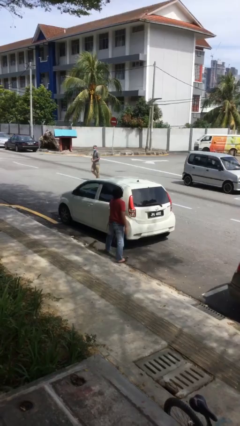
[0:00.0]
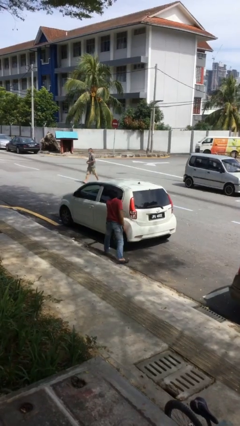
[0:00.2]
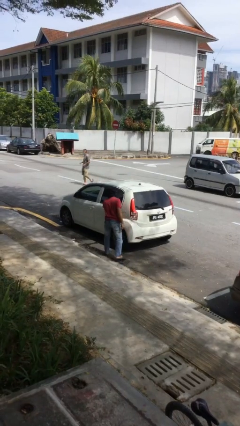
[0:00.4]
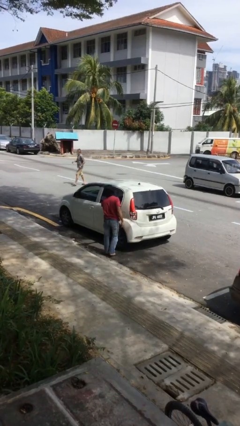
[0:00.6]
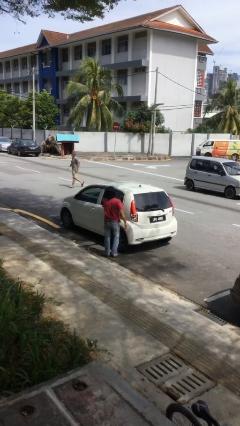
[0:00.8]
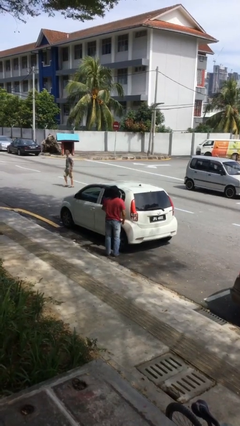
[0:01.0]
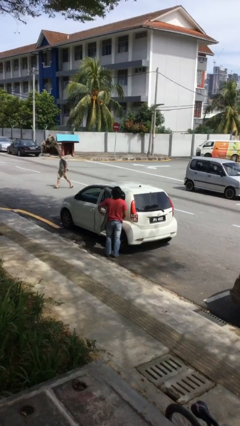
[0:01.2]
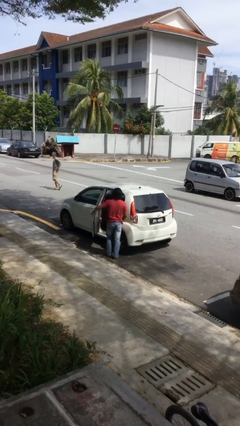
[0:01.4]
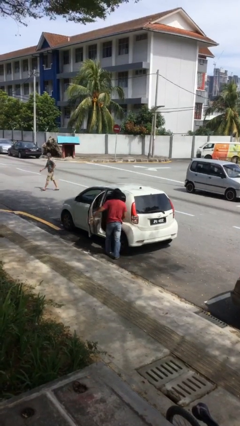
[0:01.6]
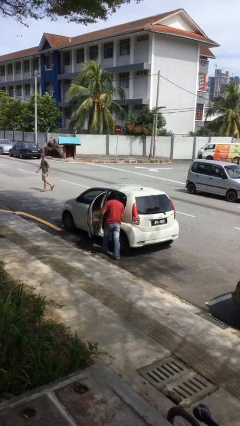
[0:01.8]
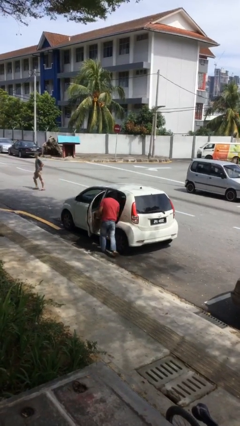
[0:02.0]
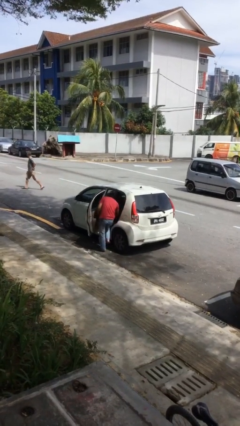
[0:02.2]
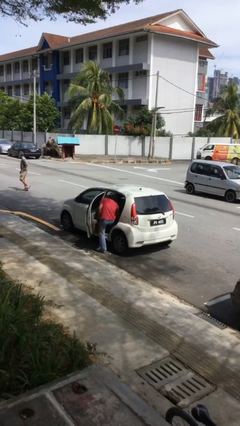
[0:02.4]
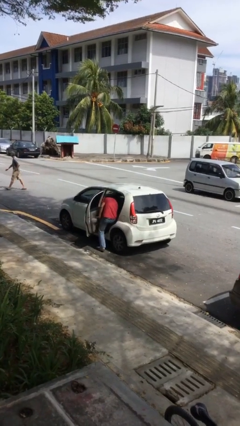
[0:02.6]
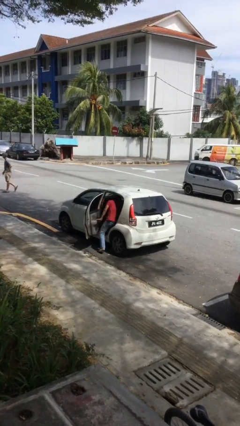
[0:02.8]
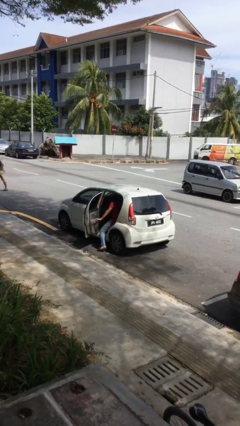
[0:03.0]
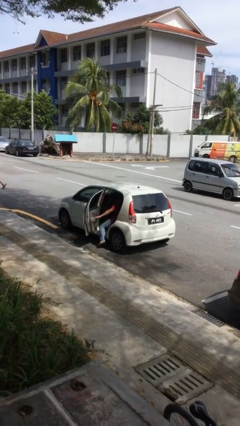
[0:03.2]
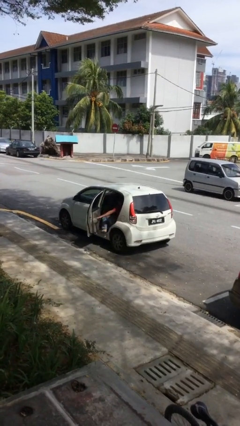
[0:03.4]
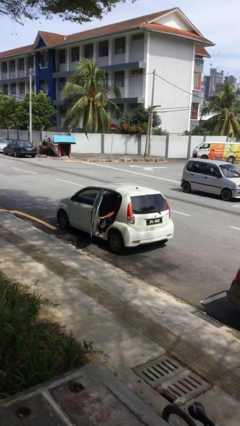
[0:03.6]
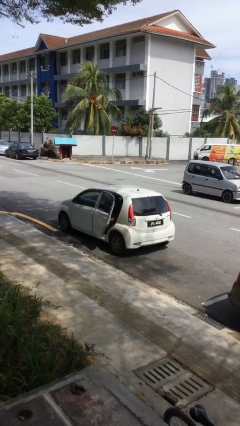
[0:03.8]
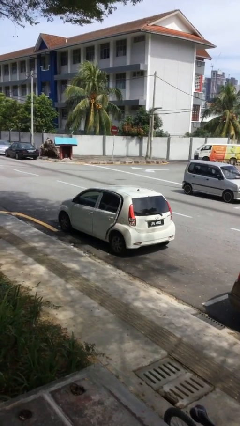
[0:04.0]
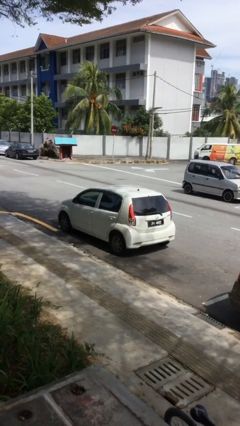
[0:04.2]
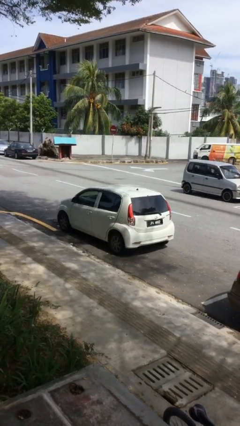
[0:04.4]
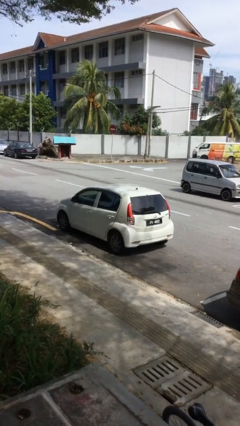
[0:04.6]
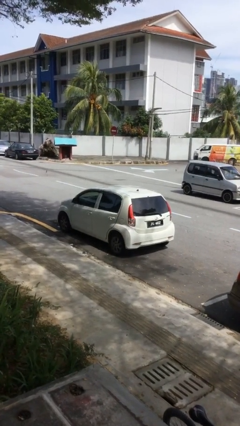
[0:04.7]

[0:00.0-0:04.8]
car picks up person

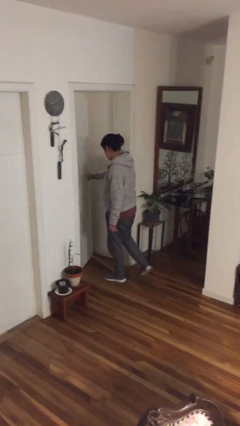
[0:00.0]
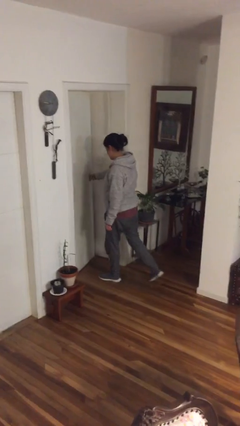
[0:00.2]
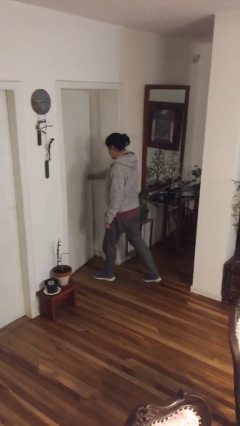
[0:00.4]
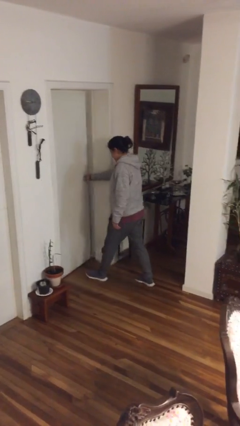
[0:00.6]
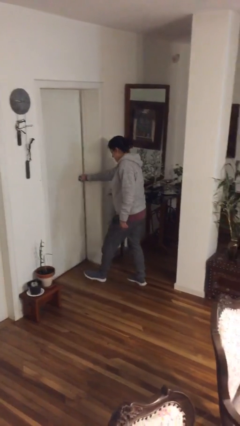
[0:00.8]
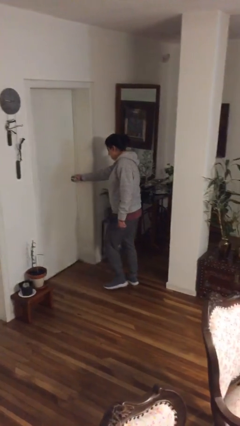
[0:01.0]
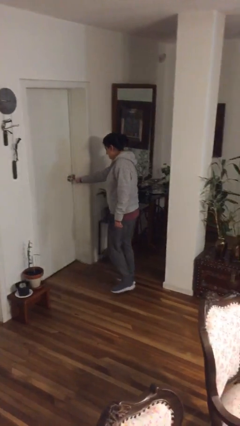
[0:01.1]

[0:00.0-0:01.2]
person closes facility door

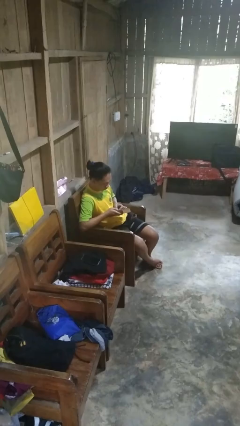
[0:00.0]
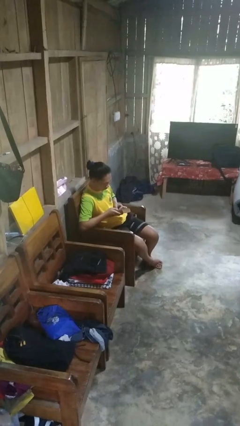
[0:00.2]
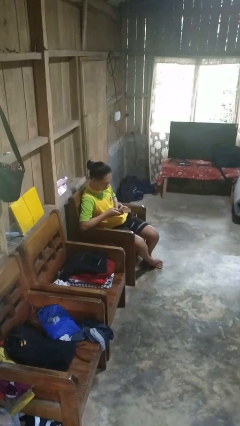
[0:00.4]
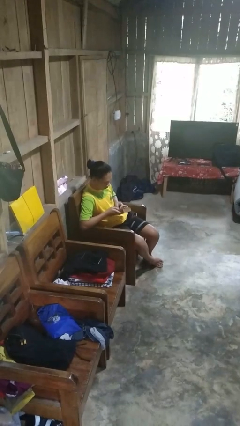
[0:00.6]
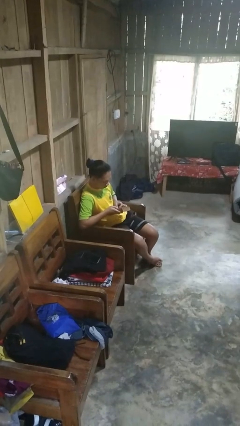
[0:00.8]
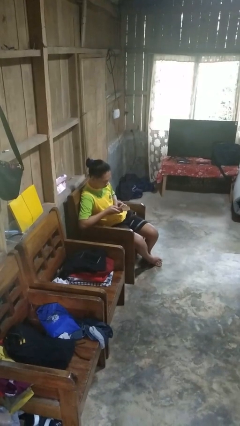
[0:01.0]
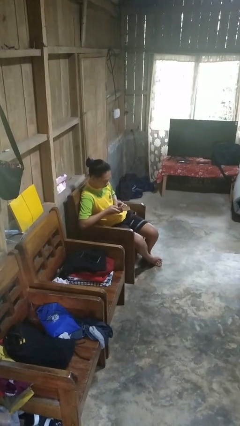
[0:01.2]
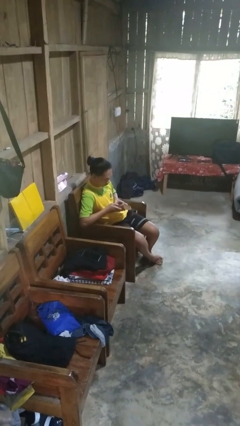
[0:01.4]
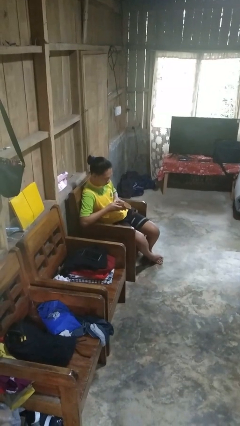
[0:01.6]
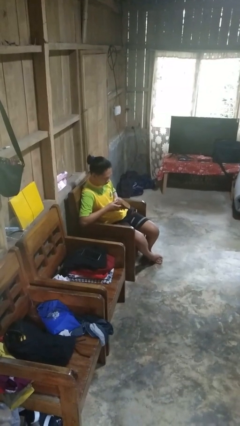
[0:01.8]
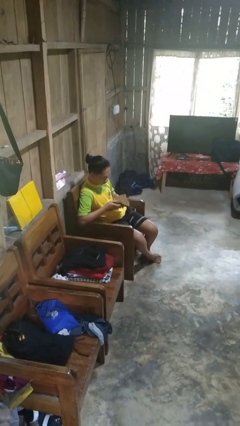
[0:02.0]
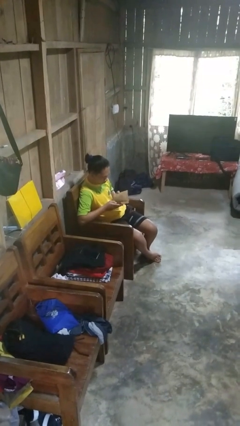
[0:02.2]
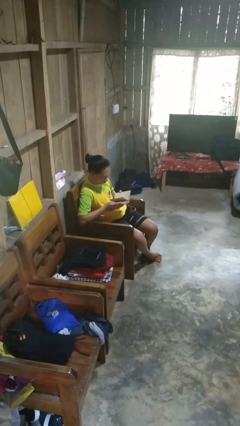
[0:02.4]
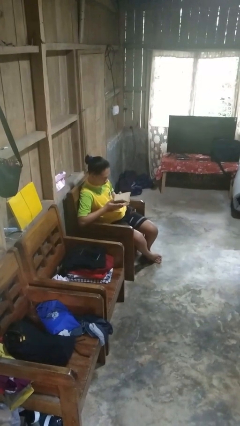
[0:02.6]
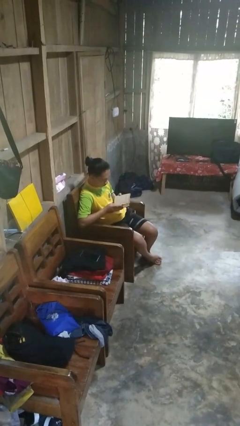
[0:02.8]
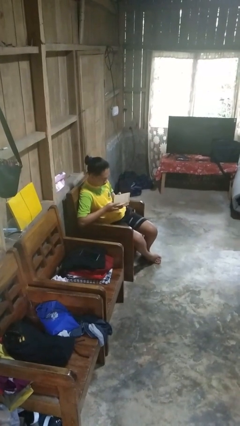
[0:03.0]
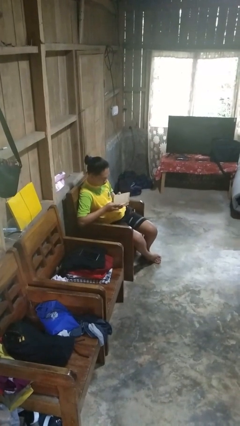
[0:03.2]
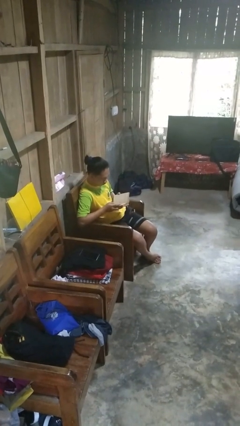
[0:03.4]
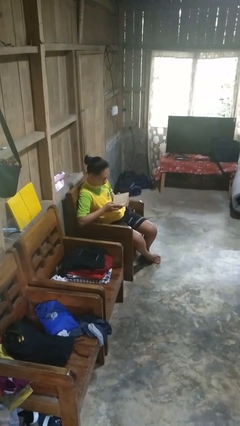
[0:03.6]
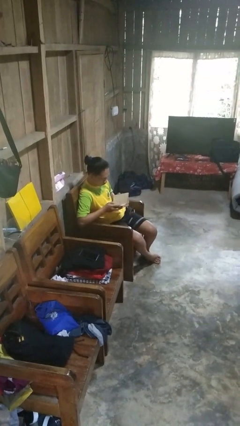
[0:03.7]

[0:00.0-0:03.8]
person reads book

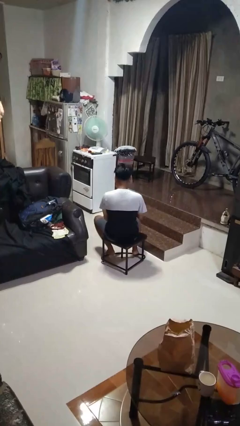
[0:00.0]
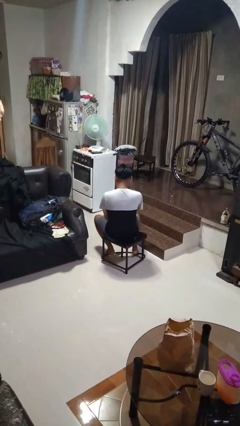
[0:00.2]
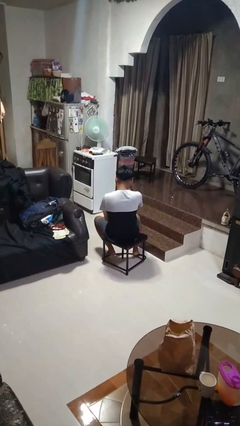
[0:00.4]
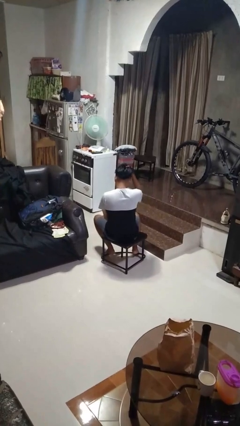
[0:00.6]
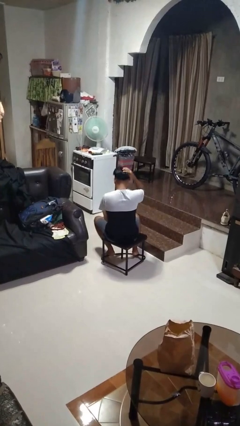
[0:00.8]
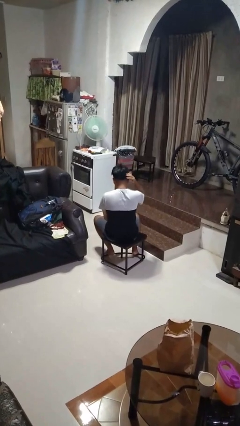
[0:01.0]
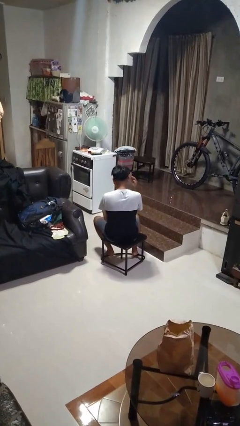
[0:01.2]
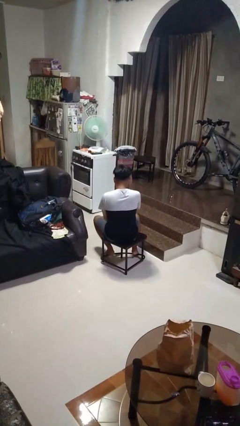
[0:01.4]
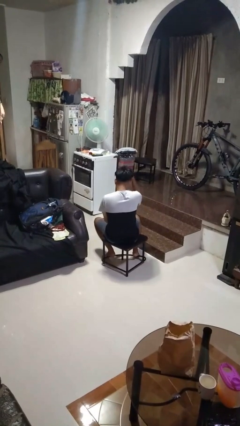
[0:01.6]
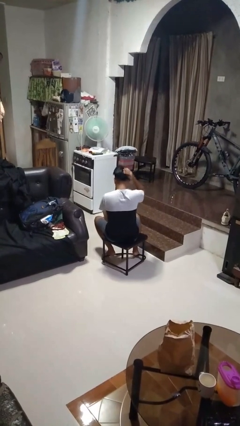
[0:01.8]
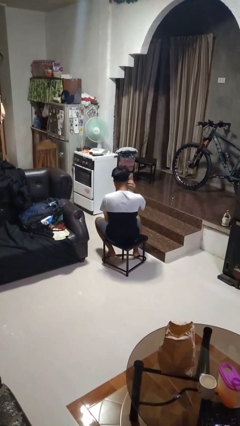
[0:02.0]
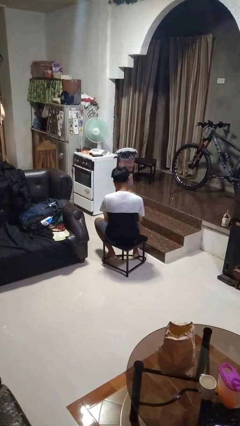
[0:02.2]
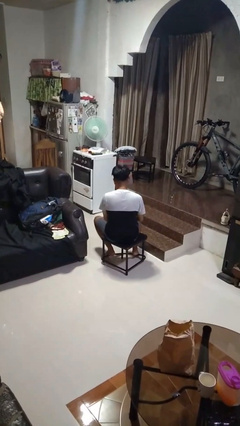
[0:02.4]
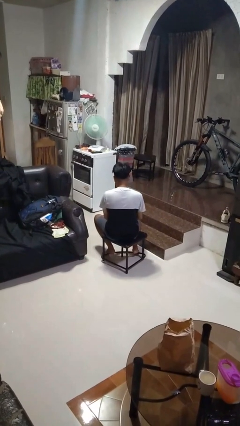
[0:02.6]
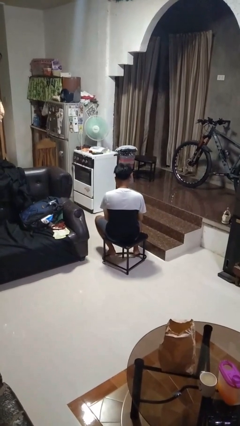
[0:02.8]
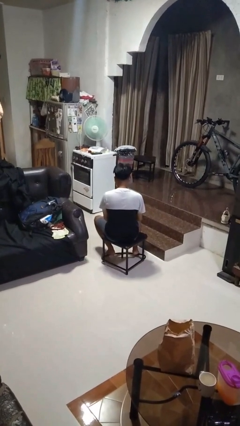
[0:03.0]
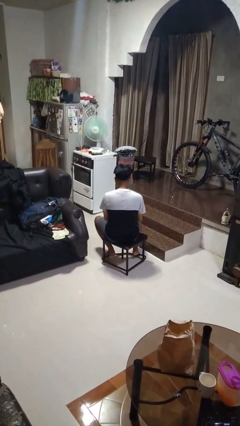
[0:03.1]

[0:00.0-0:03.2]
person strokes hair

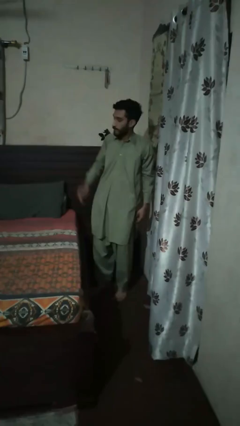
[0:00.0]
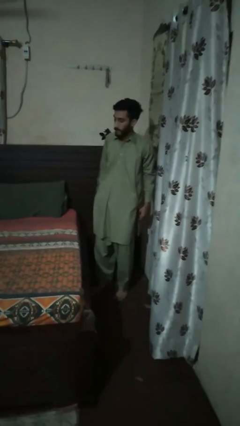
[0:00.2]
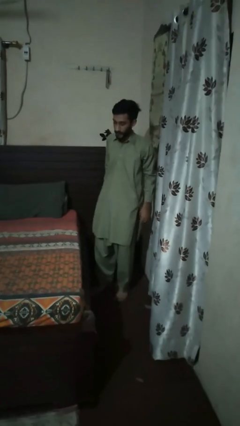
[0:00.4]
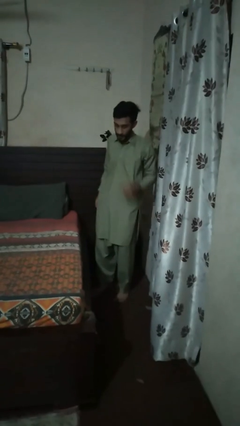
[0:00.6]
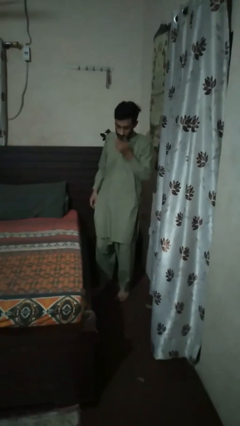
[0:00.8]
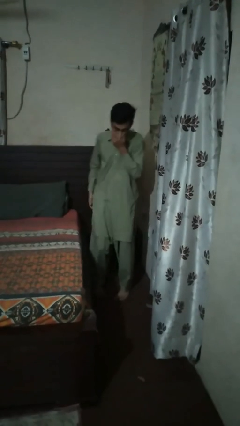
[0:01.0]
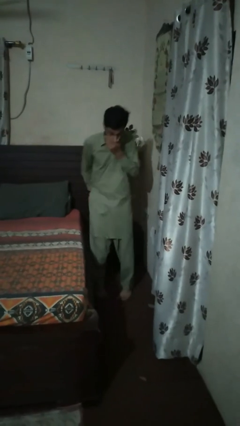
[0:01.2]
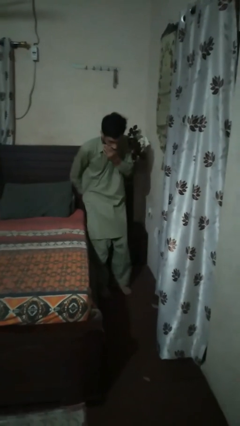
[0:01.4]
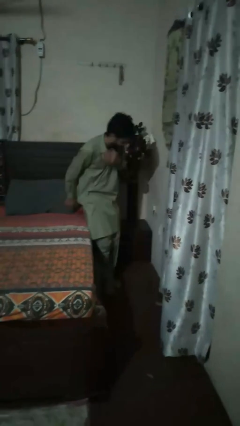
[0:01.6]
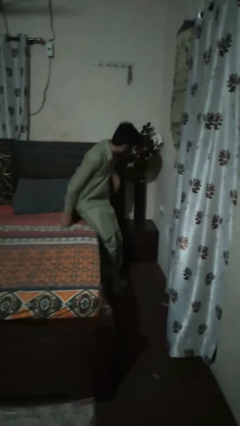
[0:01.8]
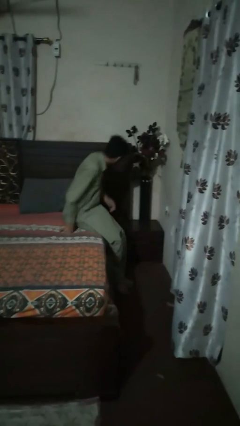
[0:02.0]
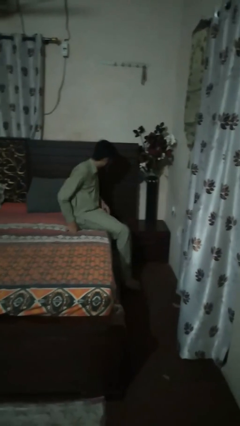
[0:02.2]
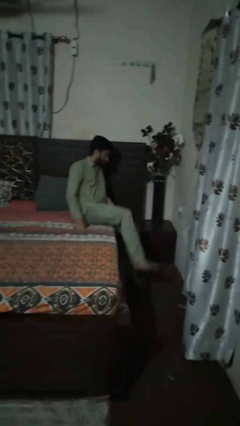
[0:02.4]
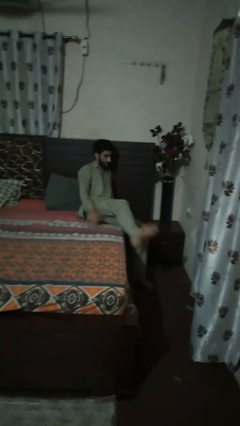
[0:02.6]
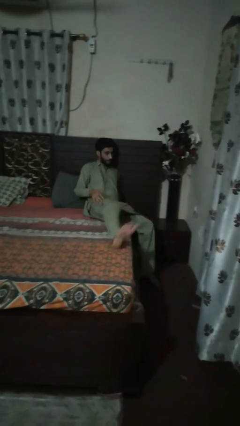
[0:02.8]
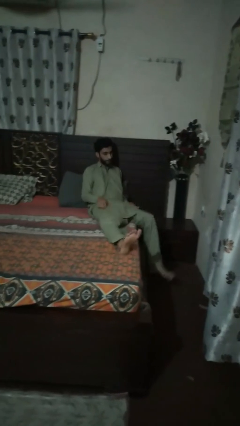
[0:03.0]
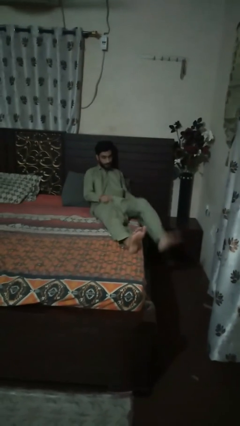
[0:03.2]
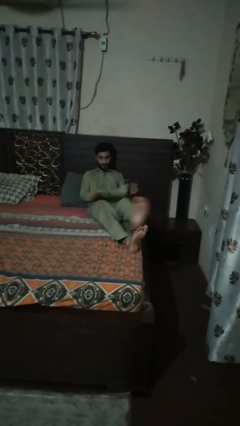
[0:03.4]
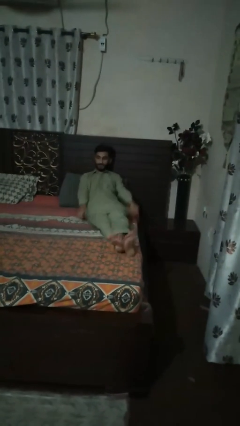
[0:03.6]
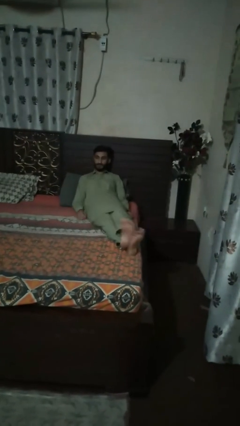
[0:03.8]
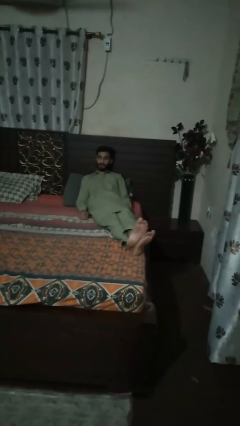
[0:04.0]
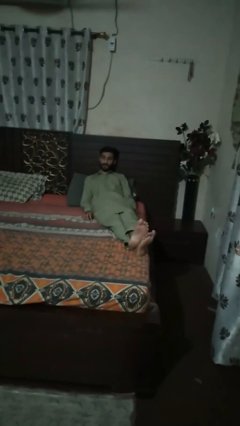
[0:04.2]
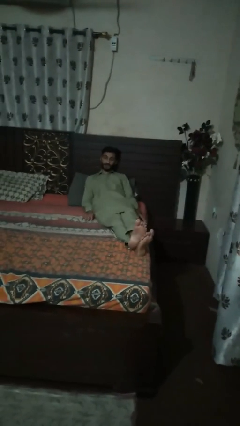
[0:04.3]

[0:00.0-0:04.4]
person lies down on bed
